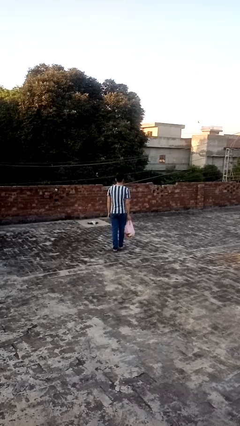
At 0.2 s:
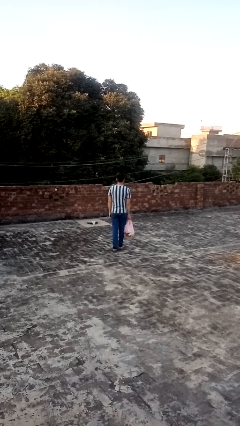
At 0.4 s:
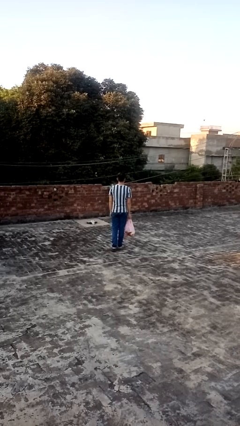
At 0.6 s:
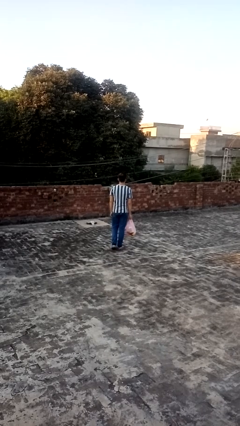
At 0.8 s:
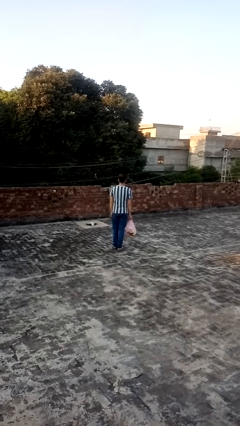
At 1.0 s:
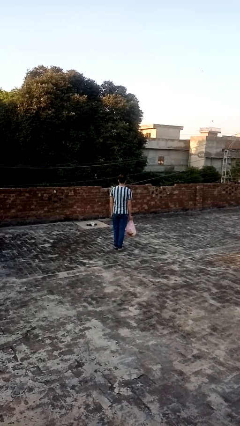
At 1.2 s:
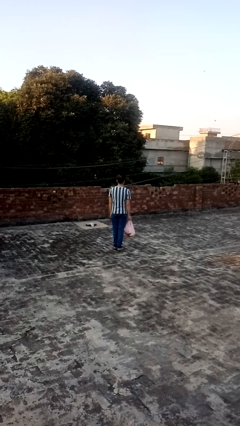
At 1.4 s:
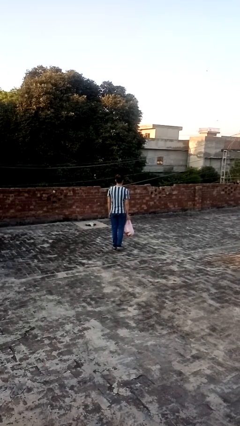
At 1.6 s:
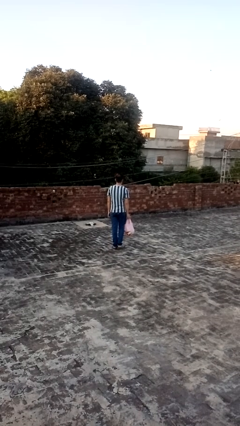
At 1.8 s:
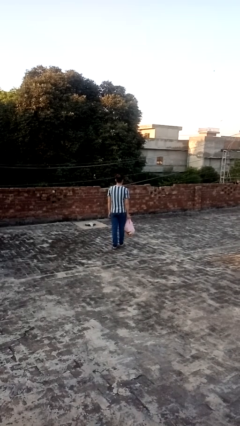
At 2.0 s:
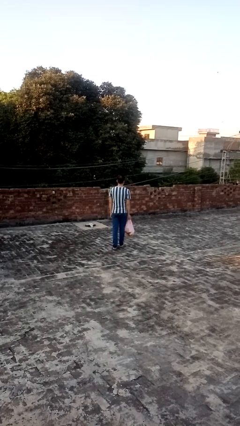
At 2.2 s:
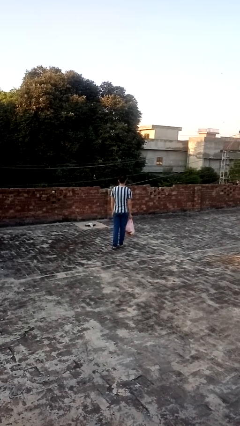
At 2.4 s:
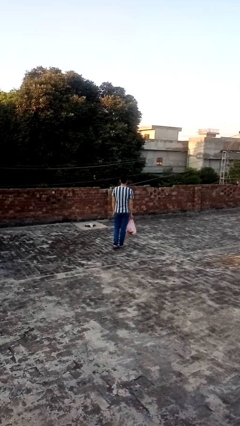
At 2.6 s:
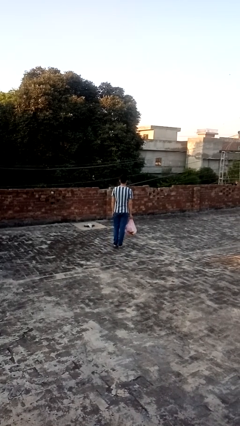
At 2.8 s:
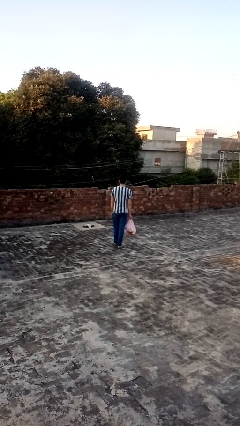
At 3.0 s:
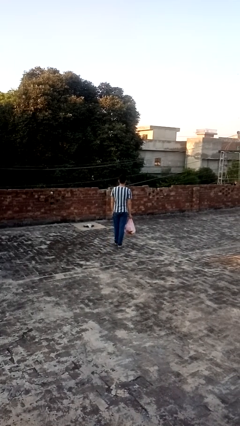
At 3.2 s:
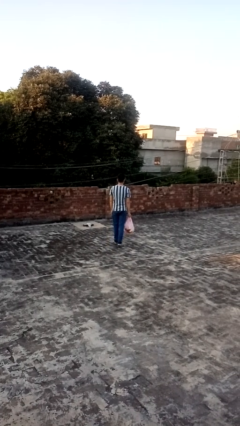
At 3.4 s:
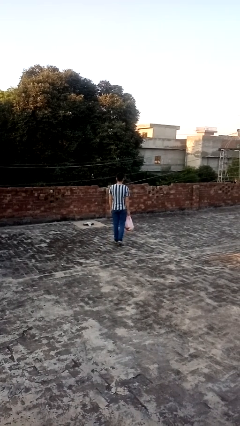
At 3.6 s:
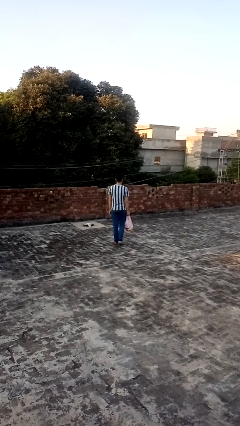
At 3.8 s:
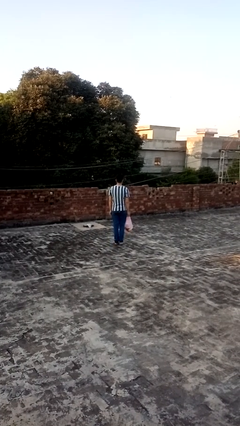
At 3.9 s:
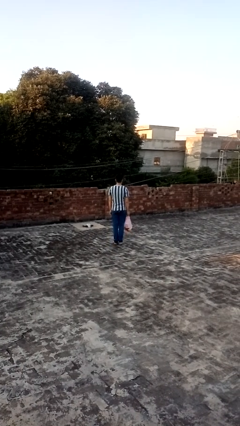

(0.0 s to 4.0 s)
person carries groceries

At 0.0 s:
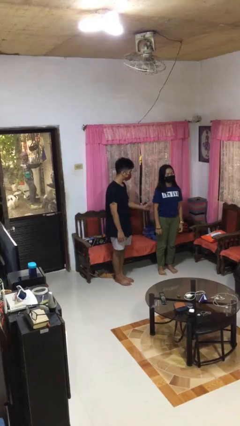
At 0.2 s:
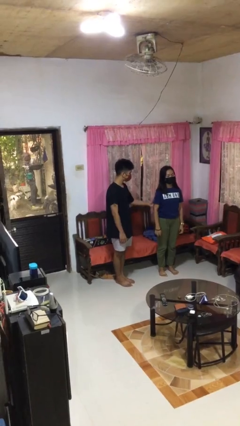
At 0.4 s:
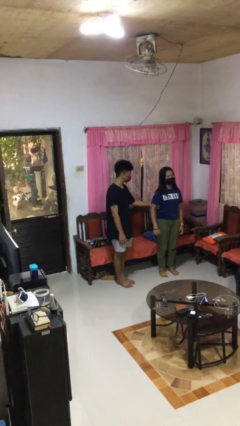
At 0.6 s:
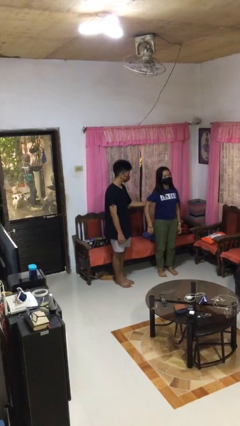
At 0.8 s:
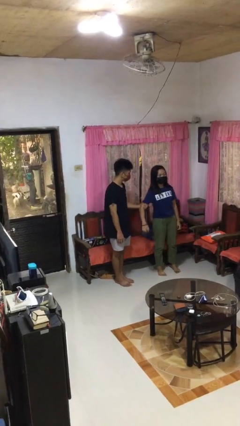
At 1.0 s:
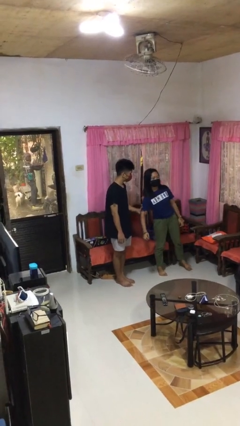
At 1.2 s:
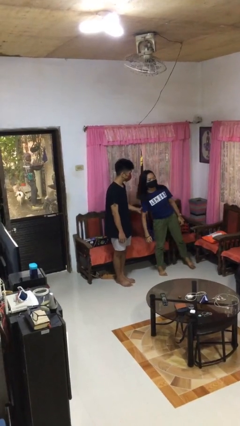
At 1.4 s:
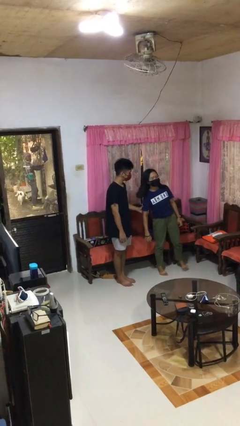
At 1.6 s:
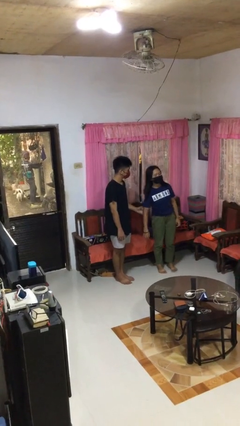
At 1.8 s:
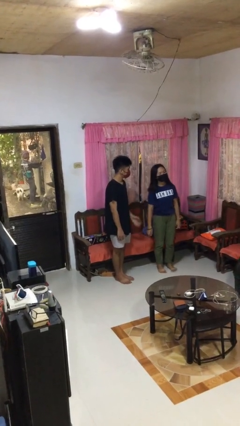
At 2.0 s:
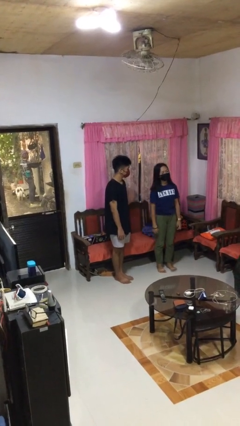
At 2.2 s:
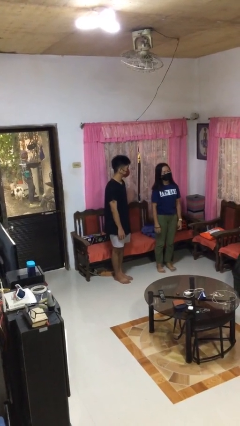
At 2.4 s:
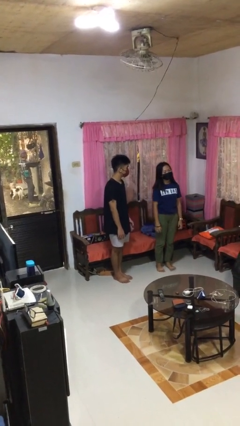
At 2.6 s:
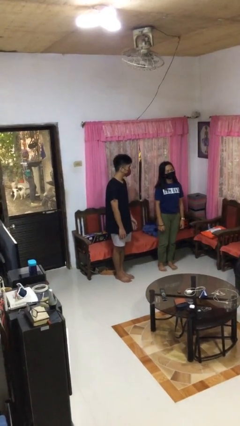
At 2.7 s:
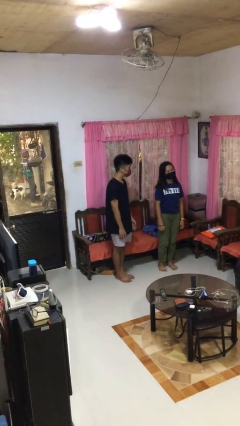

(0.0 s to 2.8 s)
person grabs person by bicep

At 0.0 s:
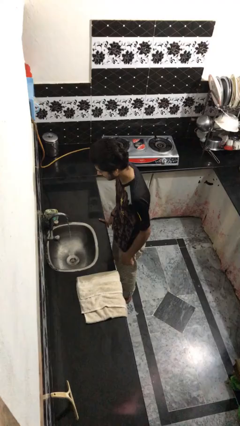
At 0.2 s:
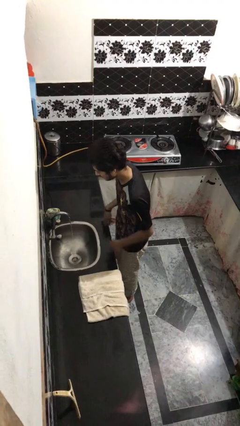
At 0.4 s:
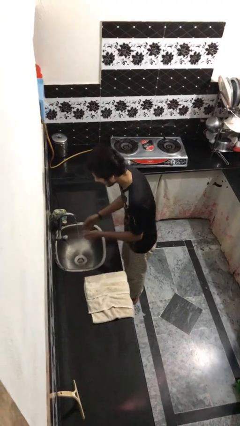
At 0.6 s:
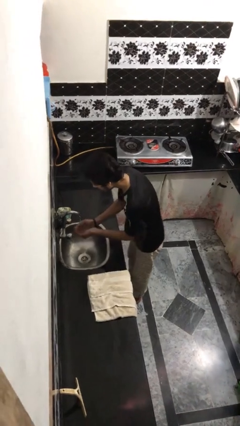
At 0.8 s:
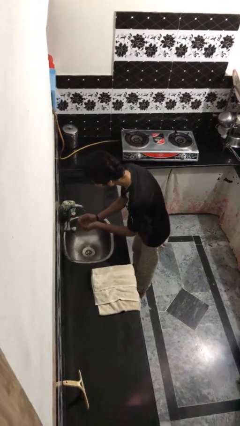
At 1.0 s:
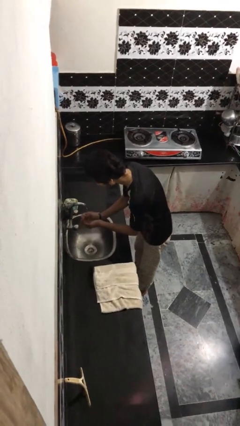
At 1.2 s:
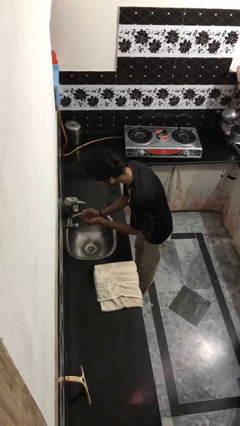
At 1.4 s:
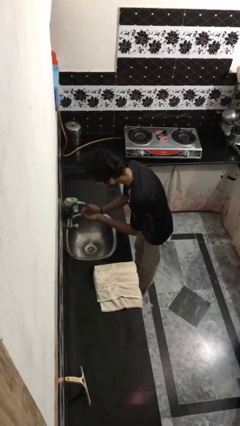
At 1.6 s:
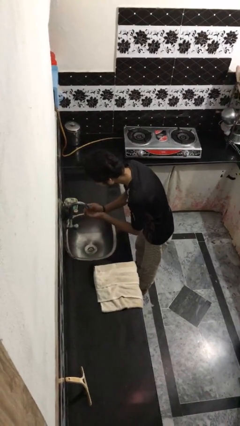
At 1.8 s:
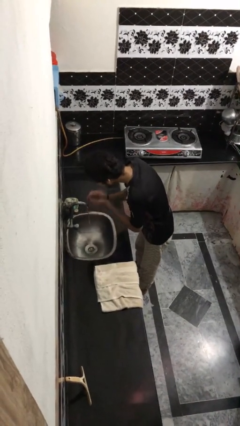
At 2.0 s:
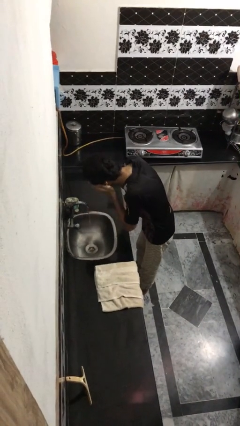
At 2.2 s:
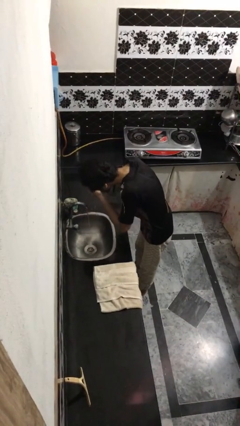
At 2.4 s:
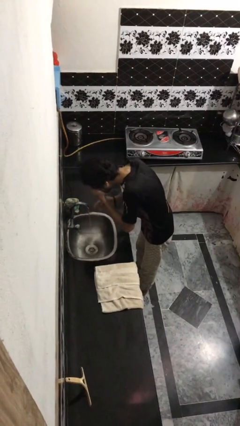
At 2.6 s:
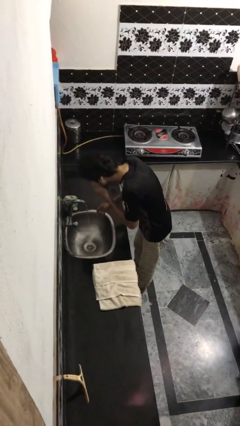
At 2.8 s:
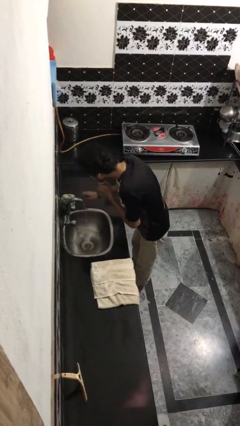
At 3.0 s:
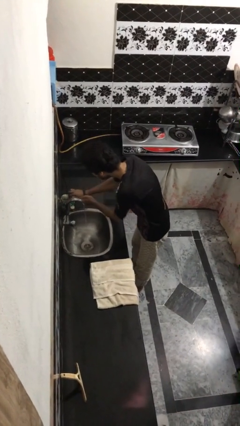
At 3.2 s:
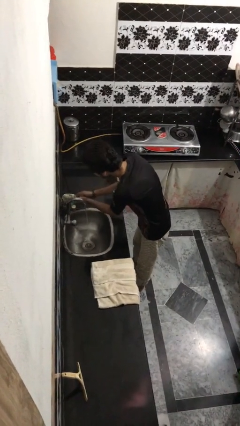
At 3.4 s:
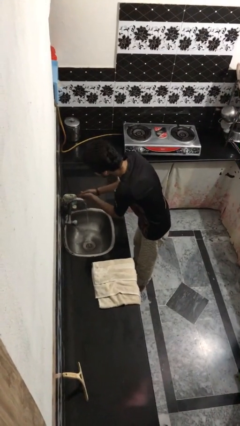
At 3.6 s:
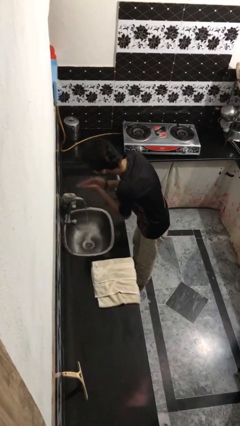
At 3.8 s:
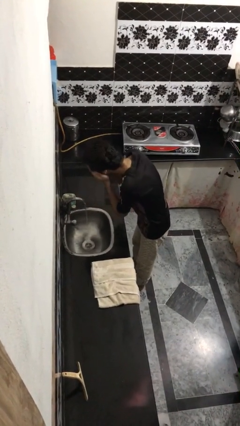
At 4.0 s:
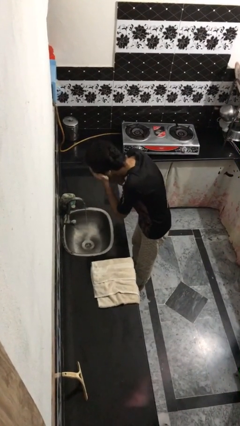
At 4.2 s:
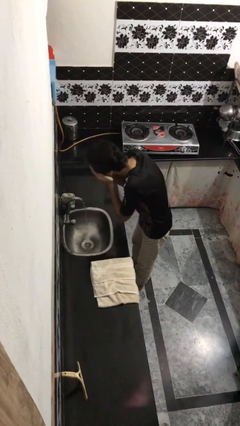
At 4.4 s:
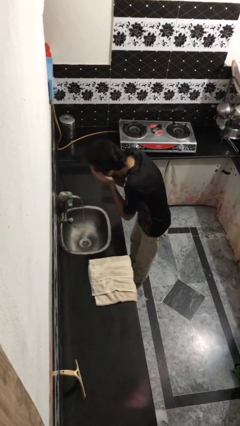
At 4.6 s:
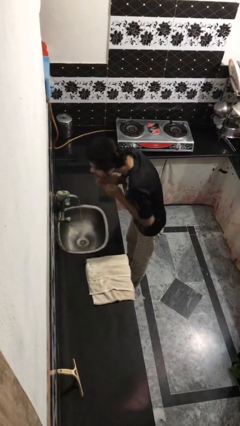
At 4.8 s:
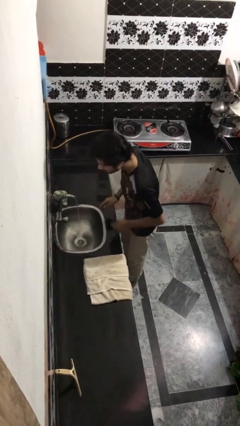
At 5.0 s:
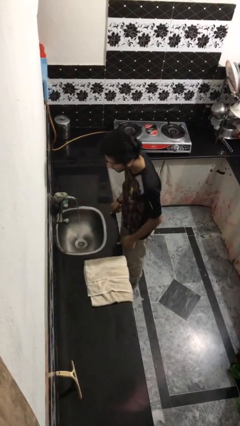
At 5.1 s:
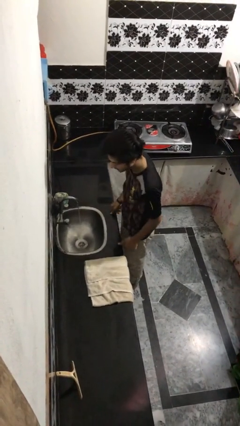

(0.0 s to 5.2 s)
person washes face

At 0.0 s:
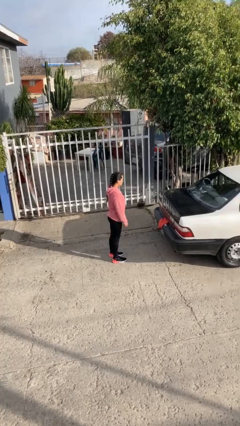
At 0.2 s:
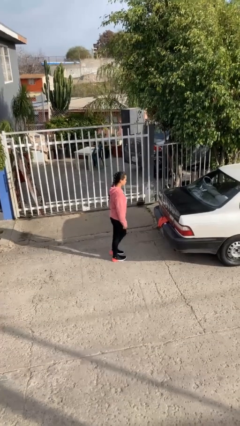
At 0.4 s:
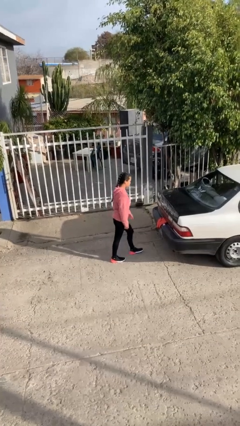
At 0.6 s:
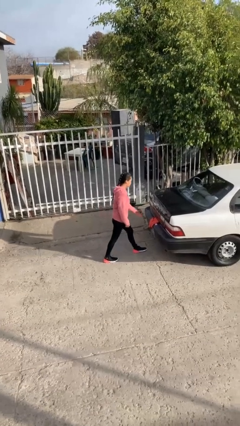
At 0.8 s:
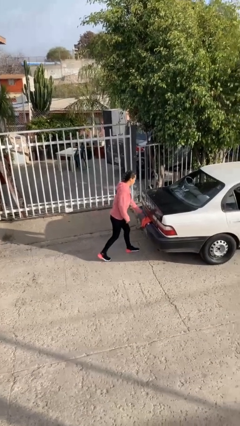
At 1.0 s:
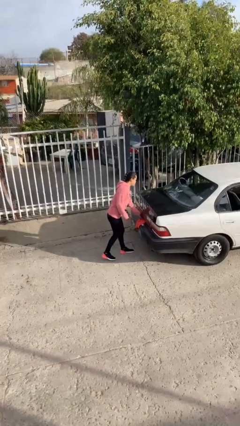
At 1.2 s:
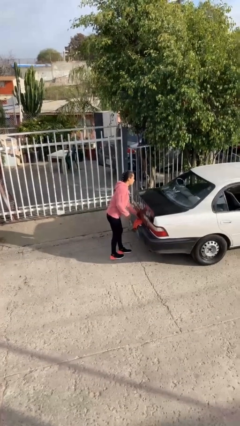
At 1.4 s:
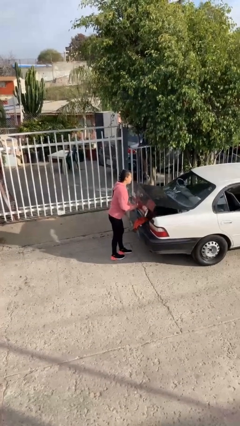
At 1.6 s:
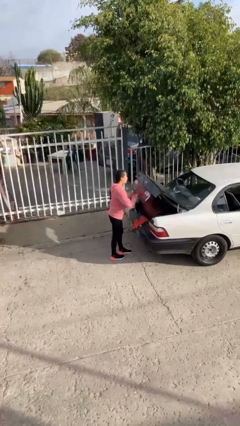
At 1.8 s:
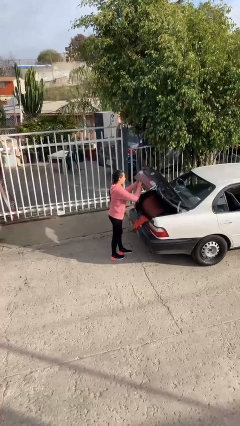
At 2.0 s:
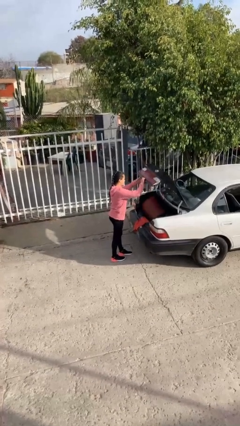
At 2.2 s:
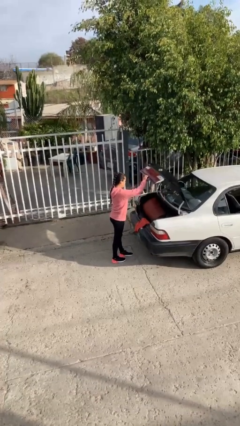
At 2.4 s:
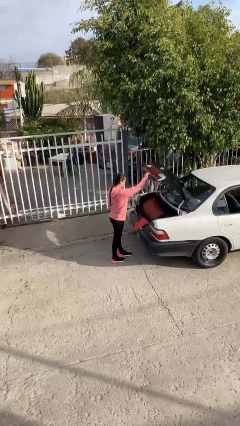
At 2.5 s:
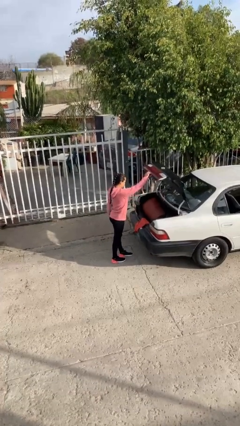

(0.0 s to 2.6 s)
person opens car trunk

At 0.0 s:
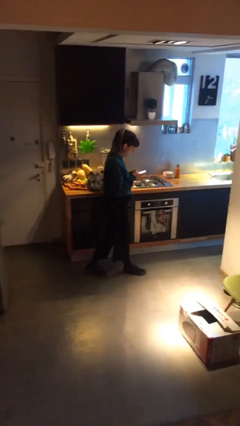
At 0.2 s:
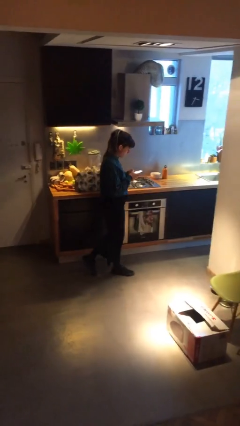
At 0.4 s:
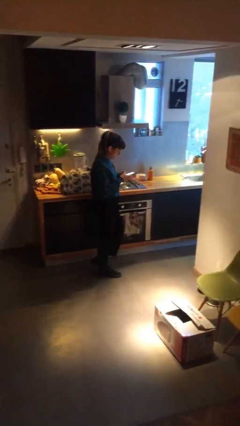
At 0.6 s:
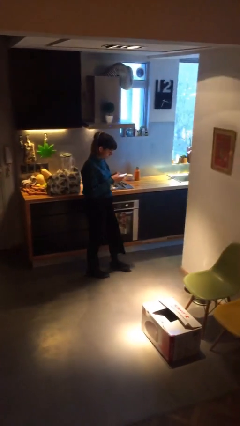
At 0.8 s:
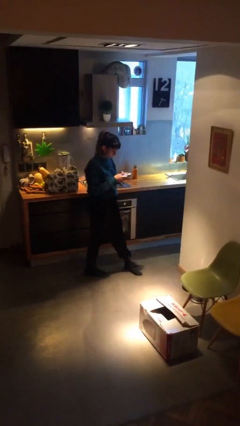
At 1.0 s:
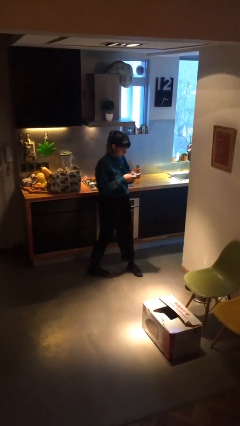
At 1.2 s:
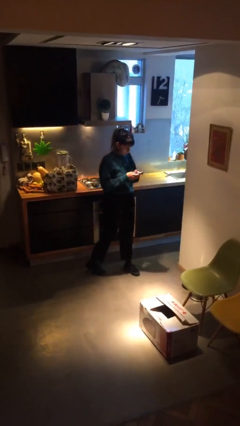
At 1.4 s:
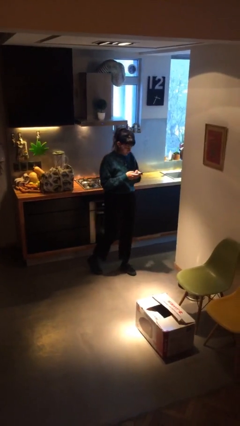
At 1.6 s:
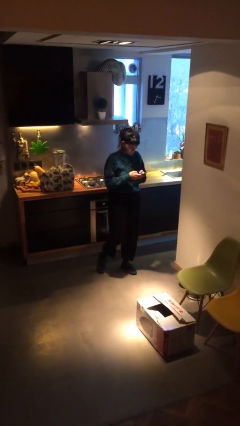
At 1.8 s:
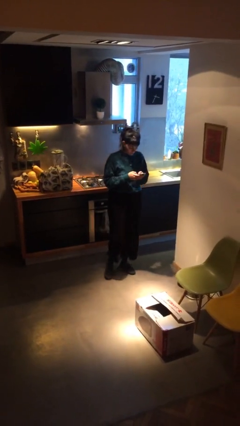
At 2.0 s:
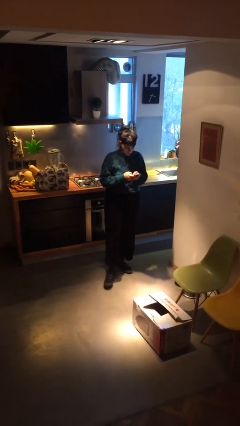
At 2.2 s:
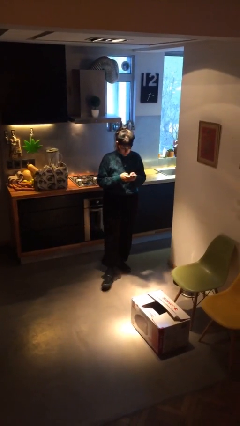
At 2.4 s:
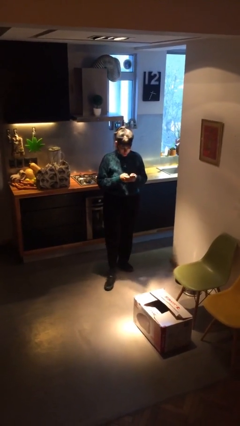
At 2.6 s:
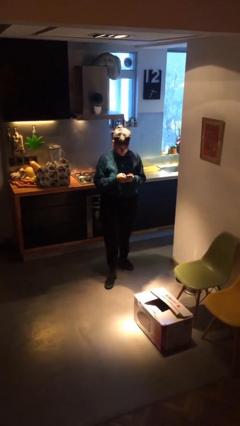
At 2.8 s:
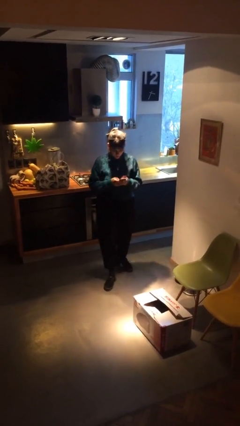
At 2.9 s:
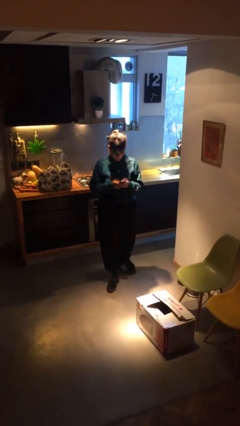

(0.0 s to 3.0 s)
person texts on phone
